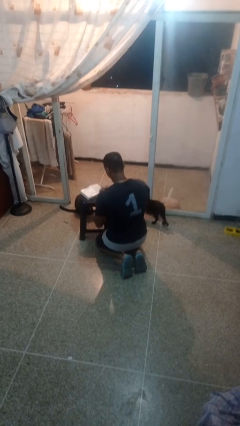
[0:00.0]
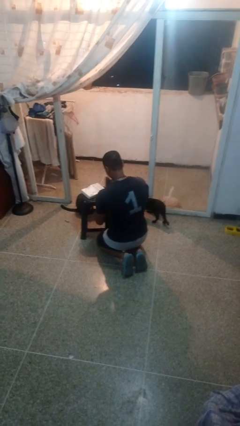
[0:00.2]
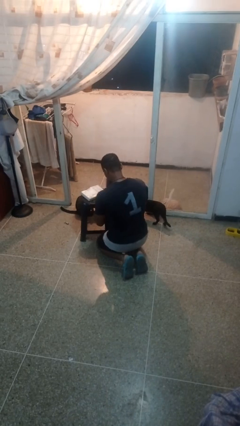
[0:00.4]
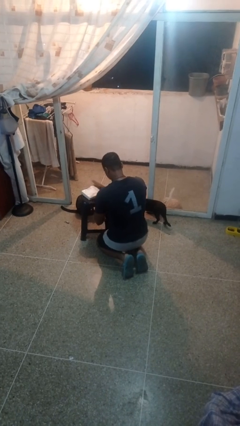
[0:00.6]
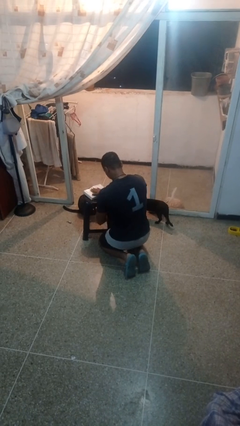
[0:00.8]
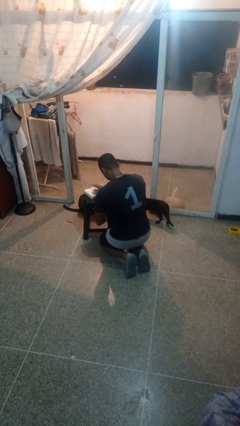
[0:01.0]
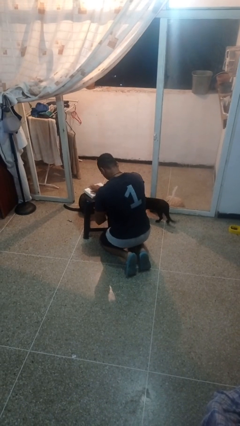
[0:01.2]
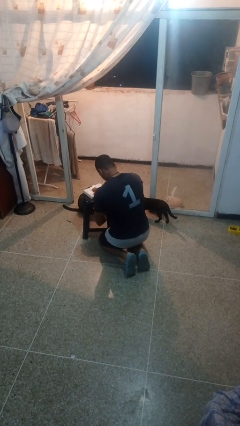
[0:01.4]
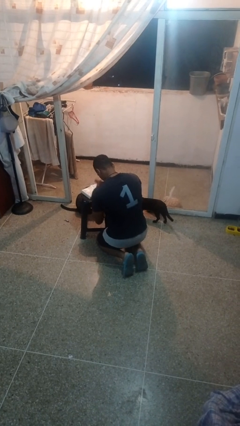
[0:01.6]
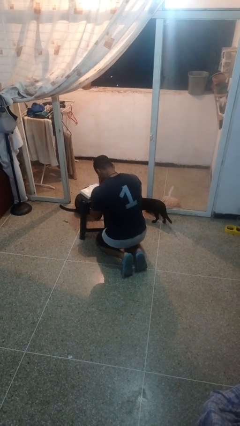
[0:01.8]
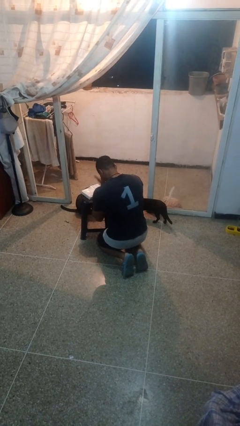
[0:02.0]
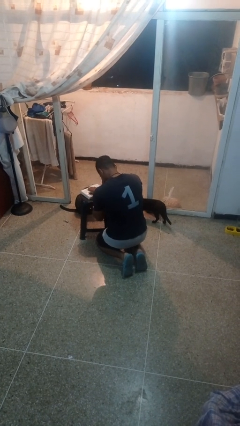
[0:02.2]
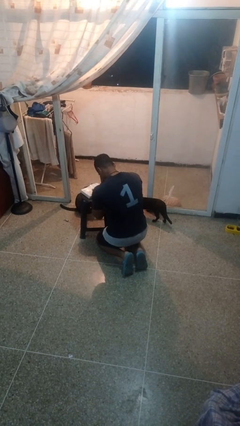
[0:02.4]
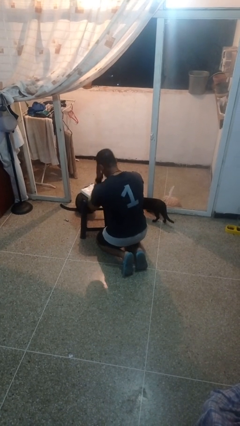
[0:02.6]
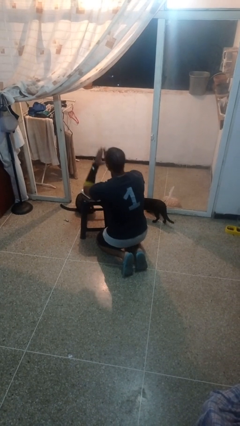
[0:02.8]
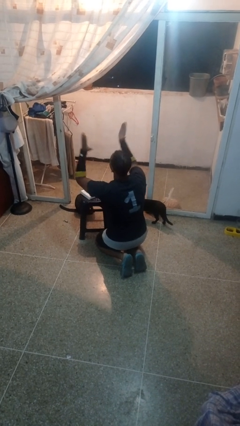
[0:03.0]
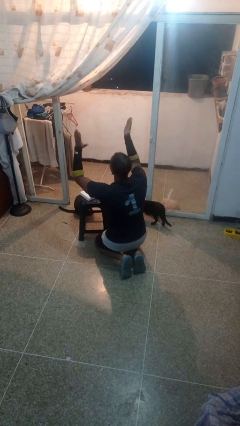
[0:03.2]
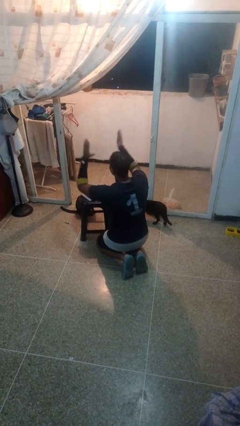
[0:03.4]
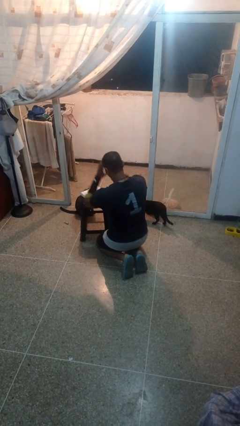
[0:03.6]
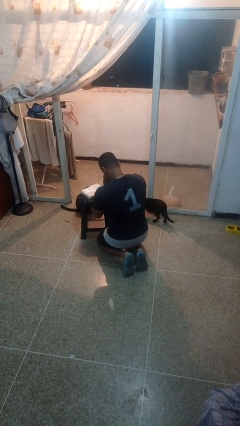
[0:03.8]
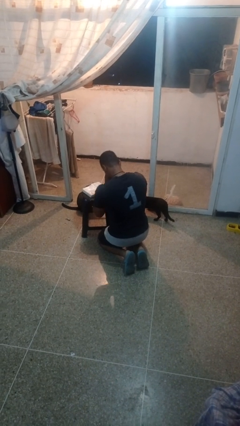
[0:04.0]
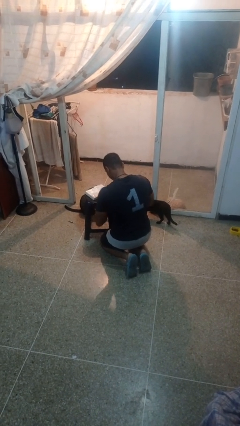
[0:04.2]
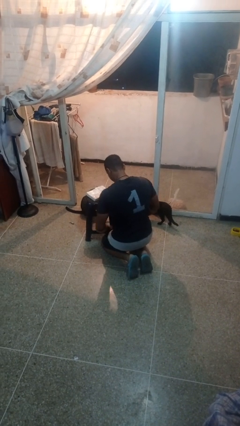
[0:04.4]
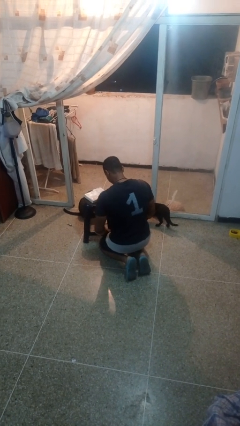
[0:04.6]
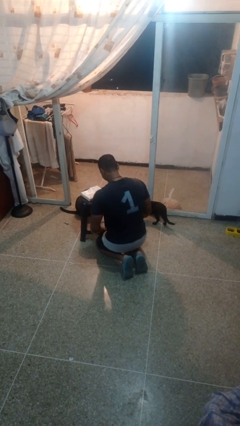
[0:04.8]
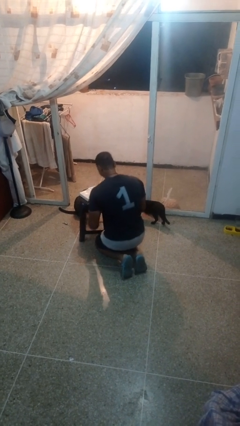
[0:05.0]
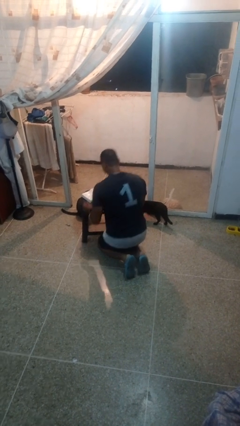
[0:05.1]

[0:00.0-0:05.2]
person prays

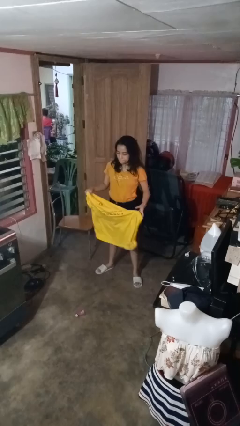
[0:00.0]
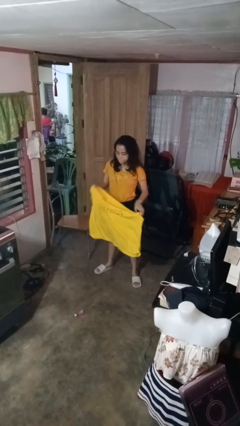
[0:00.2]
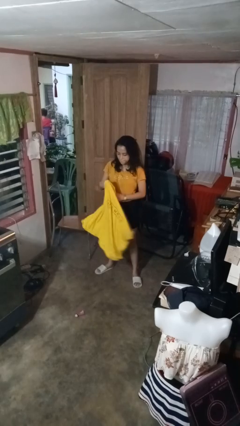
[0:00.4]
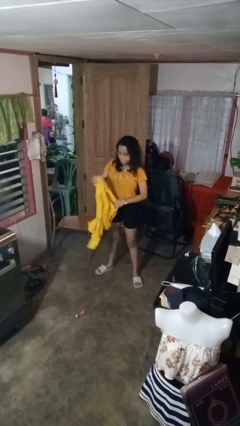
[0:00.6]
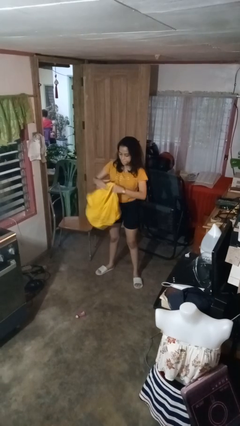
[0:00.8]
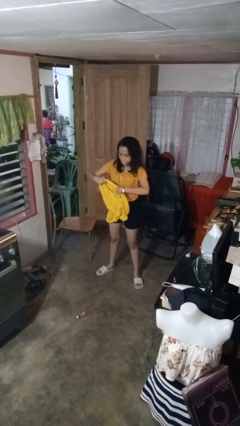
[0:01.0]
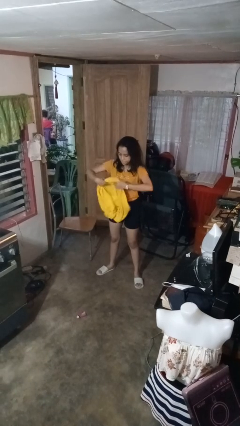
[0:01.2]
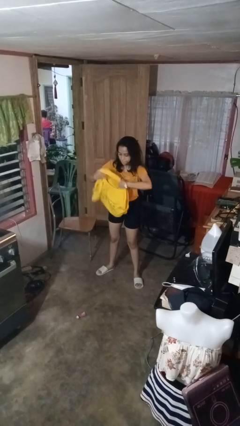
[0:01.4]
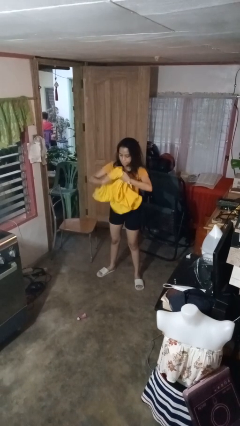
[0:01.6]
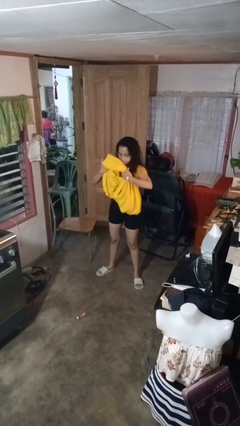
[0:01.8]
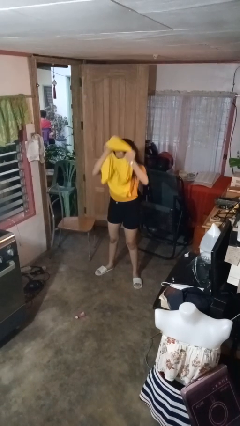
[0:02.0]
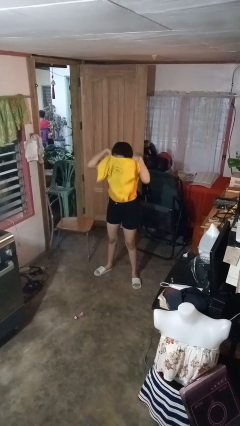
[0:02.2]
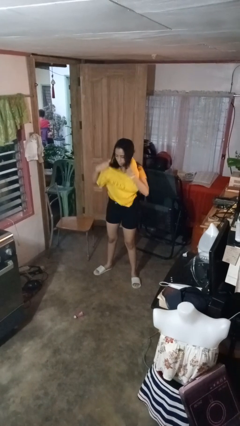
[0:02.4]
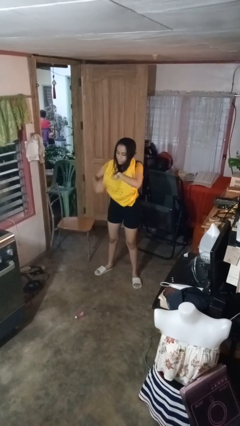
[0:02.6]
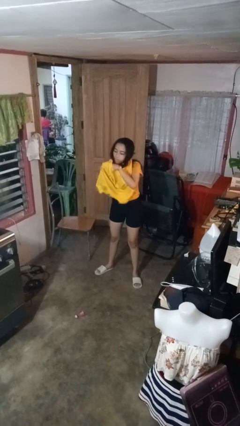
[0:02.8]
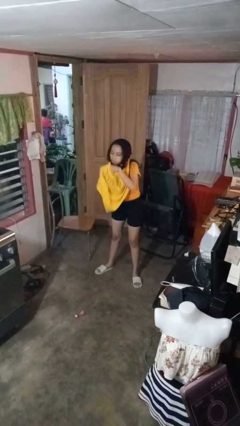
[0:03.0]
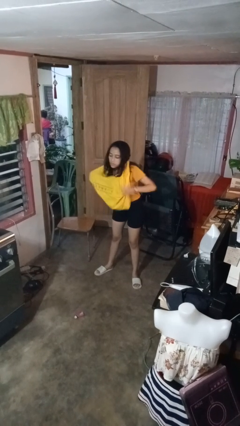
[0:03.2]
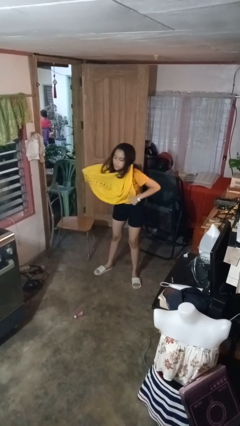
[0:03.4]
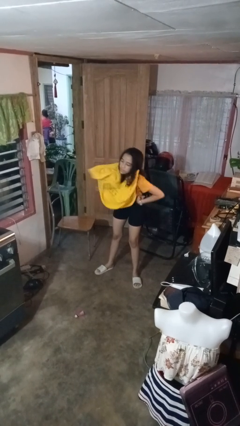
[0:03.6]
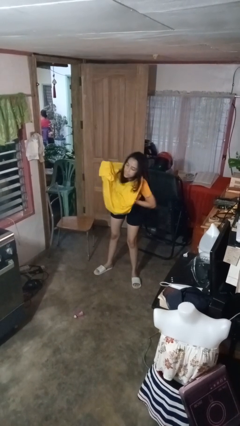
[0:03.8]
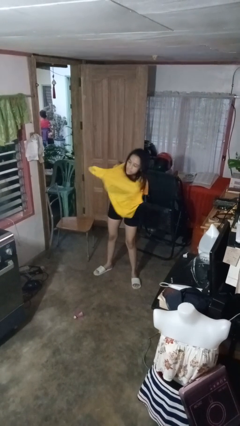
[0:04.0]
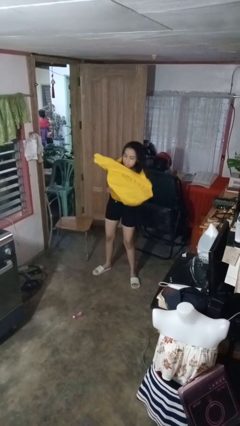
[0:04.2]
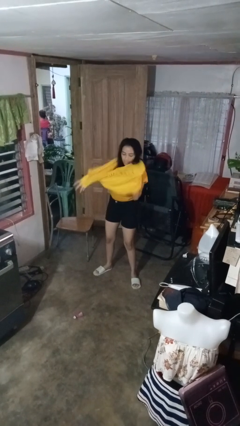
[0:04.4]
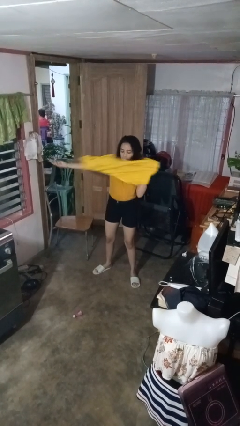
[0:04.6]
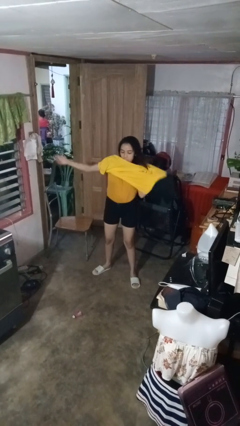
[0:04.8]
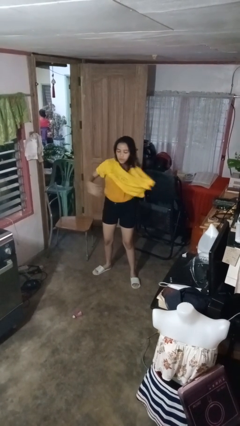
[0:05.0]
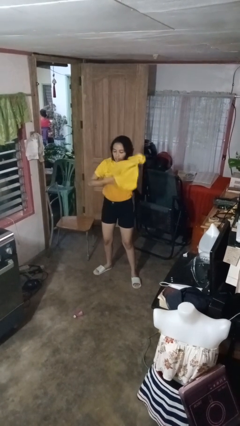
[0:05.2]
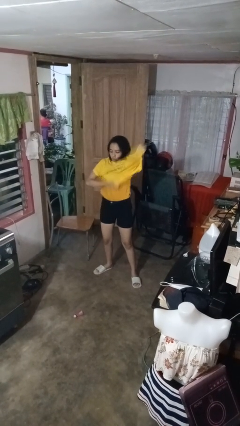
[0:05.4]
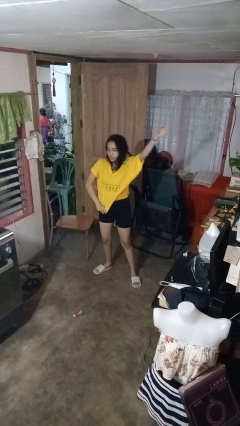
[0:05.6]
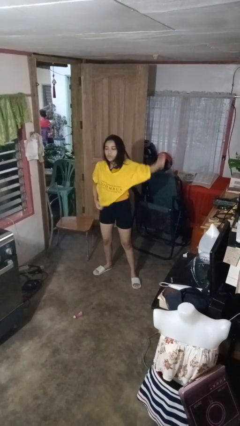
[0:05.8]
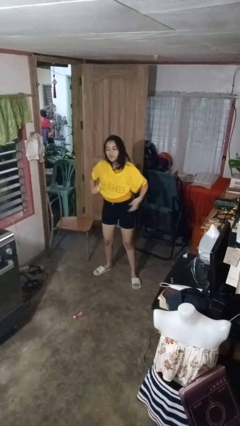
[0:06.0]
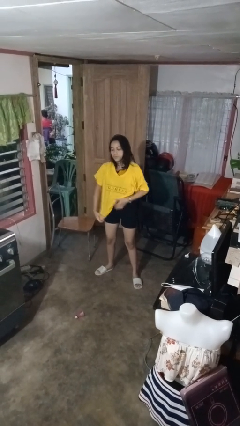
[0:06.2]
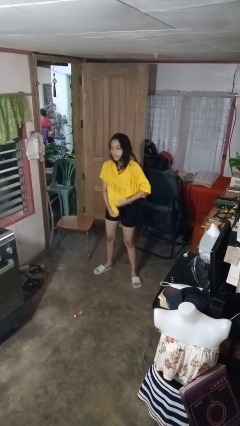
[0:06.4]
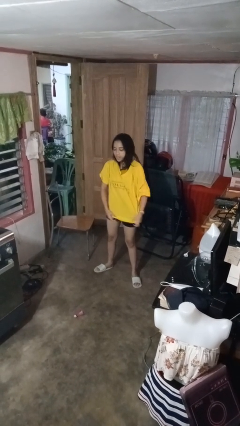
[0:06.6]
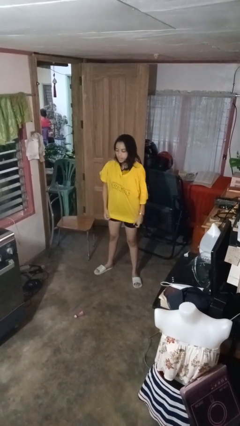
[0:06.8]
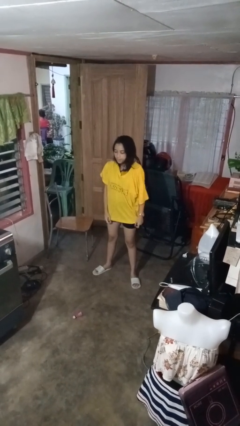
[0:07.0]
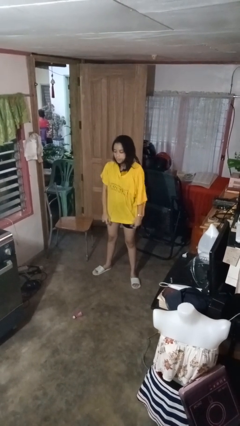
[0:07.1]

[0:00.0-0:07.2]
person puts on shirt

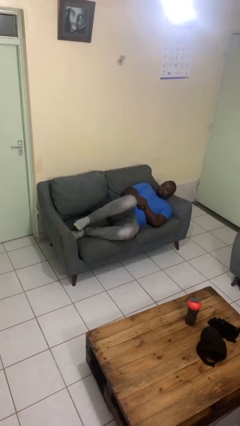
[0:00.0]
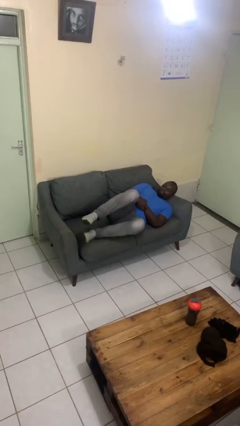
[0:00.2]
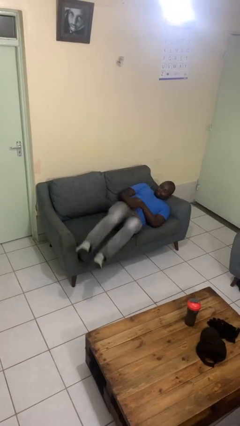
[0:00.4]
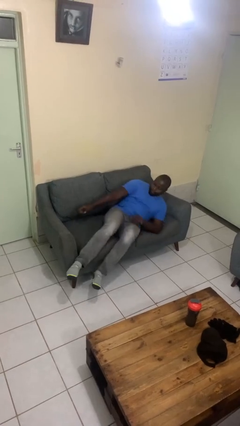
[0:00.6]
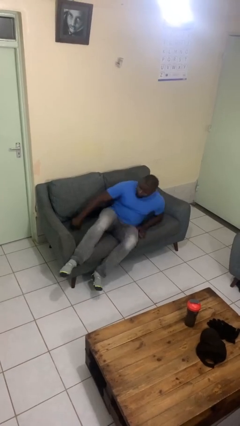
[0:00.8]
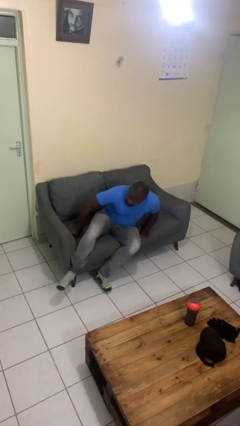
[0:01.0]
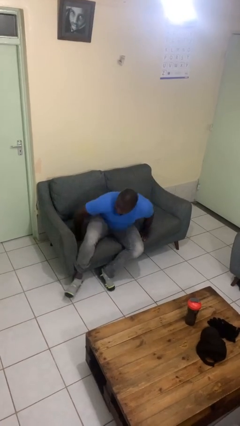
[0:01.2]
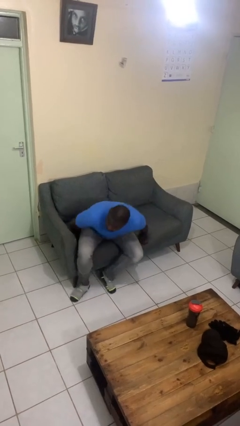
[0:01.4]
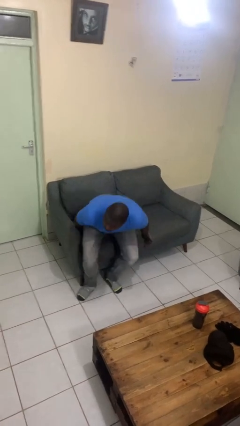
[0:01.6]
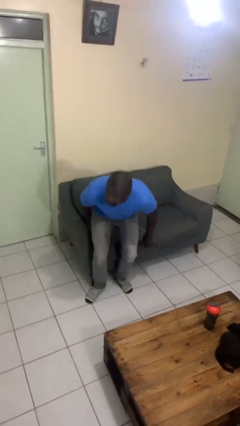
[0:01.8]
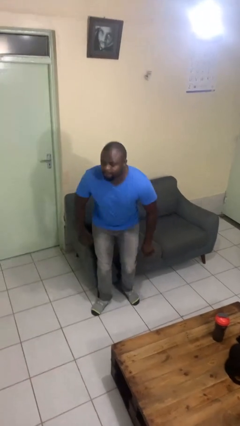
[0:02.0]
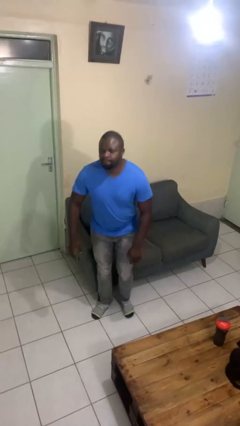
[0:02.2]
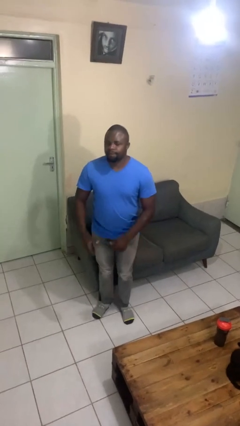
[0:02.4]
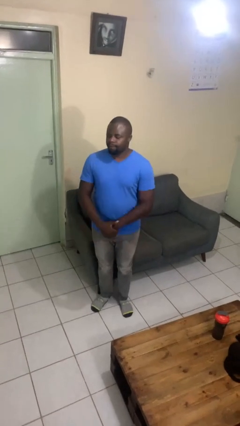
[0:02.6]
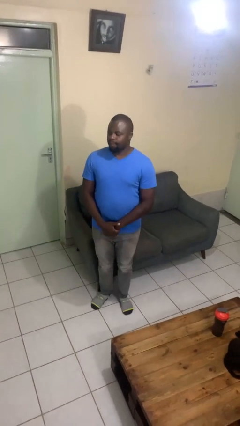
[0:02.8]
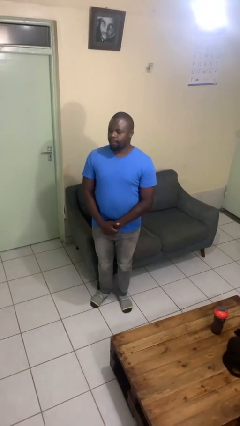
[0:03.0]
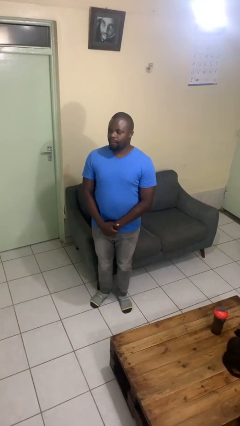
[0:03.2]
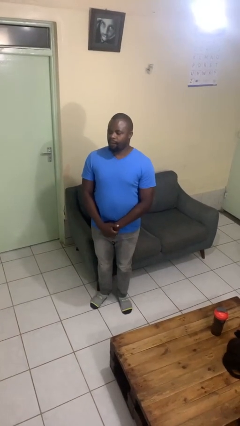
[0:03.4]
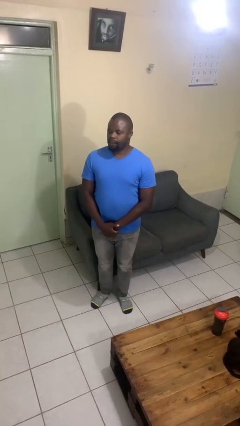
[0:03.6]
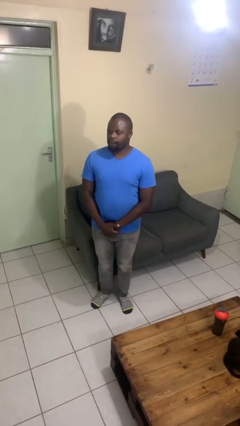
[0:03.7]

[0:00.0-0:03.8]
person stands up

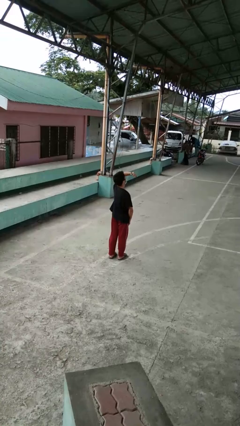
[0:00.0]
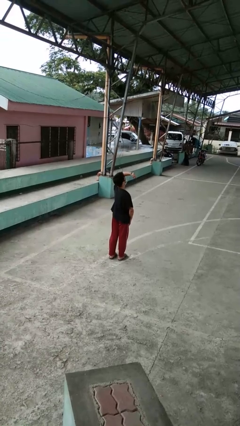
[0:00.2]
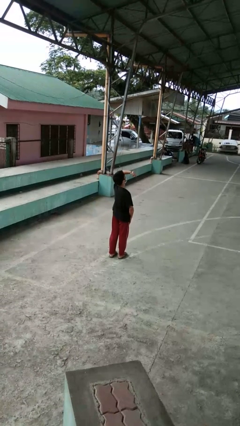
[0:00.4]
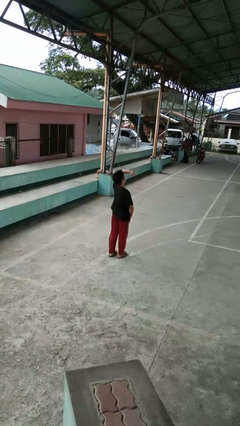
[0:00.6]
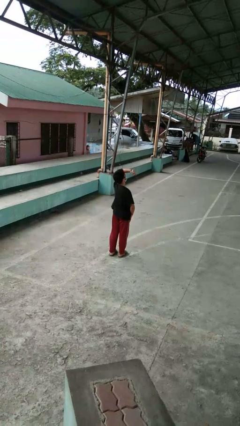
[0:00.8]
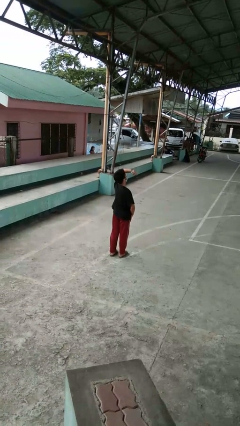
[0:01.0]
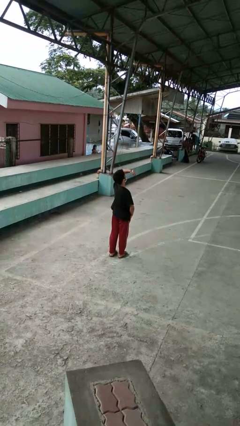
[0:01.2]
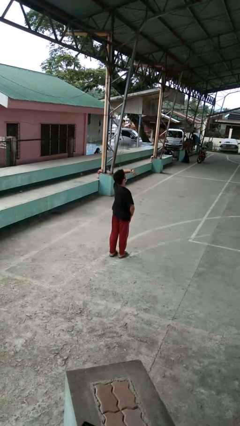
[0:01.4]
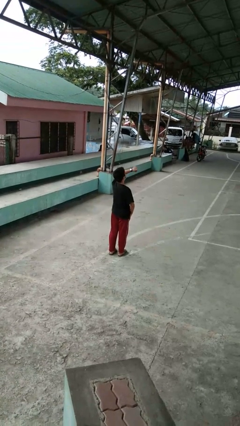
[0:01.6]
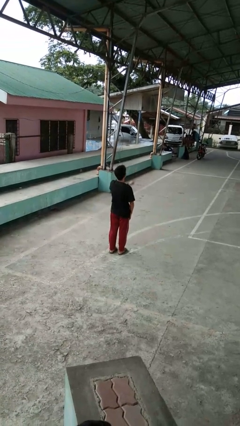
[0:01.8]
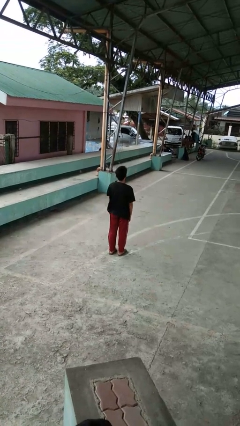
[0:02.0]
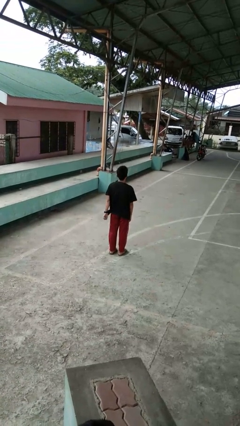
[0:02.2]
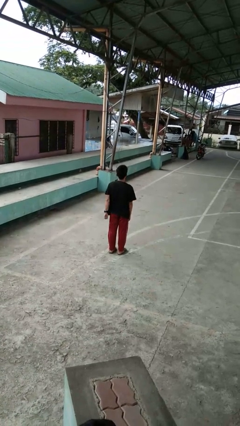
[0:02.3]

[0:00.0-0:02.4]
person looks at wristwatch
